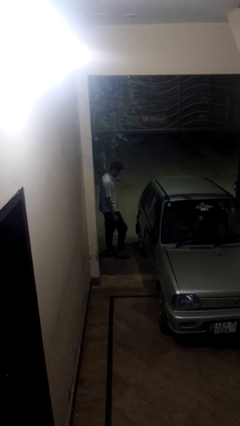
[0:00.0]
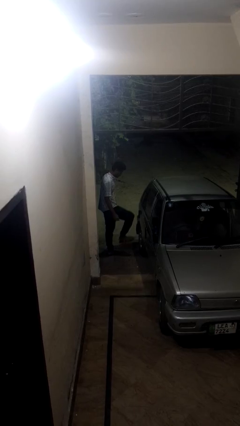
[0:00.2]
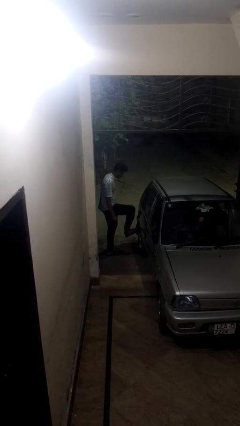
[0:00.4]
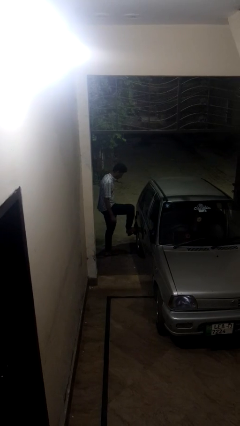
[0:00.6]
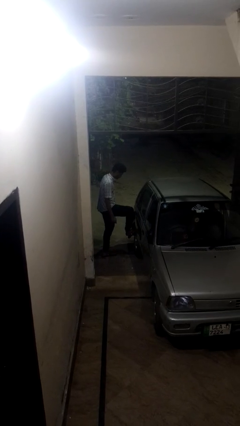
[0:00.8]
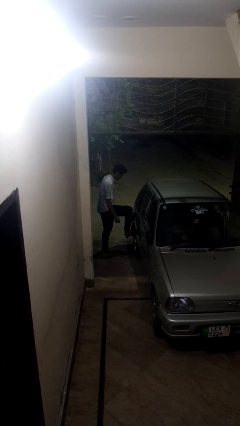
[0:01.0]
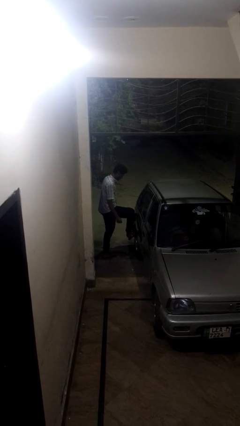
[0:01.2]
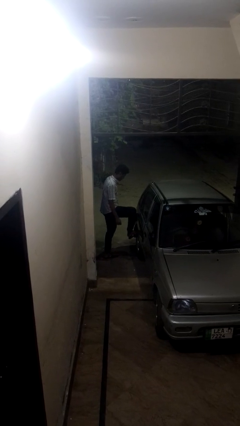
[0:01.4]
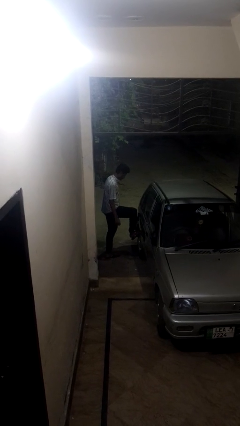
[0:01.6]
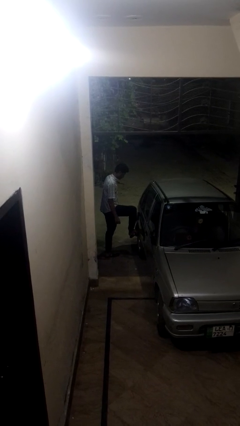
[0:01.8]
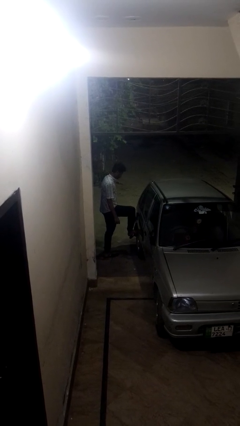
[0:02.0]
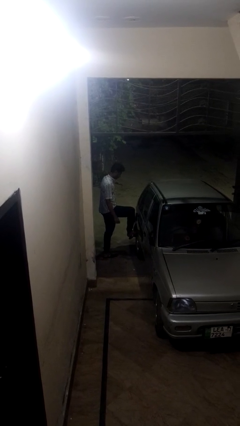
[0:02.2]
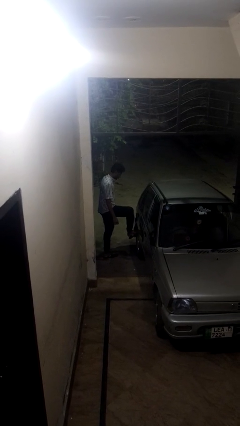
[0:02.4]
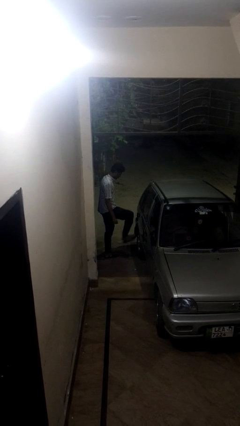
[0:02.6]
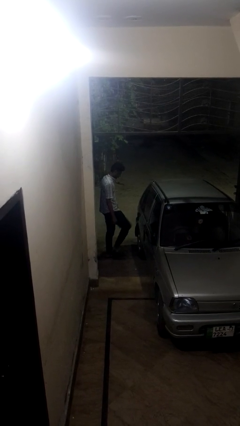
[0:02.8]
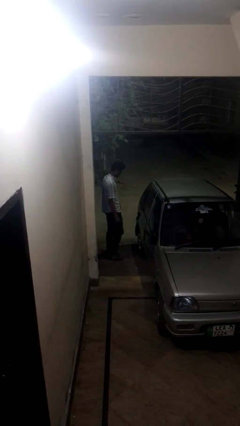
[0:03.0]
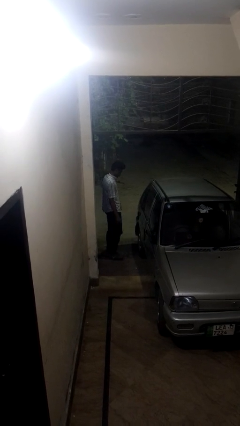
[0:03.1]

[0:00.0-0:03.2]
person kicks car tires

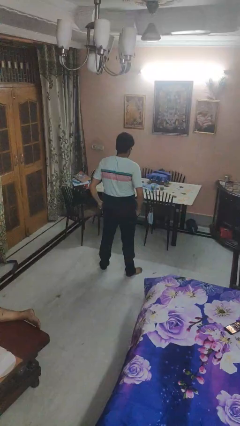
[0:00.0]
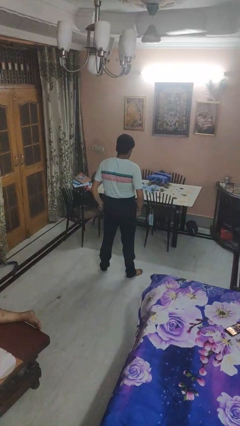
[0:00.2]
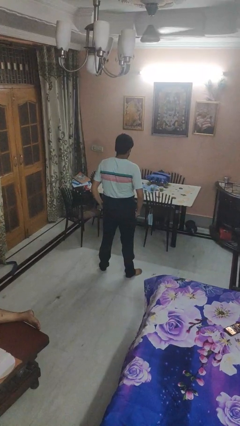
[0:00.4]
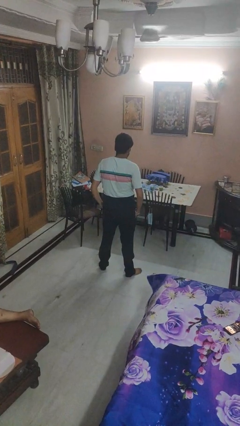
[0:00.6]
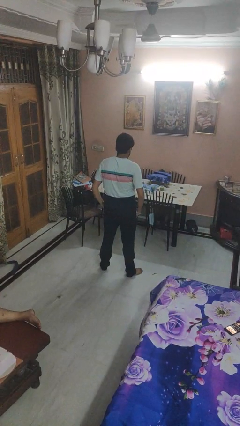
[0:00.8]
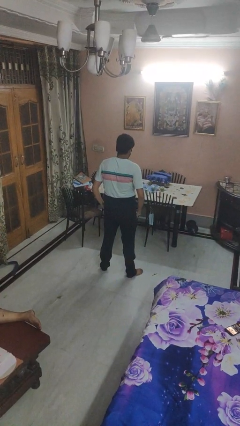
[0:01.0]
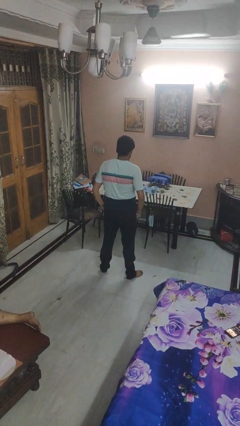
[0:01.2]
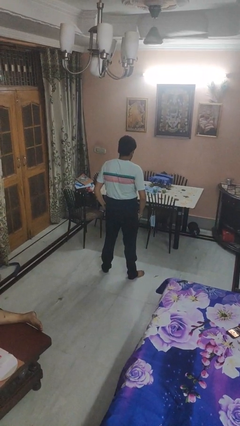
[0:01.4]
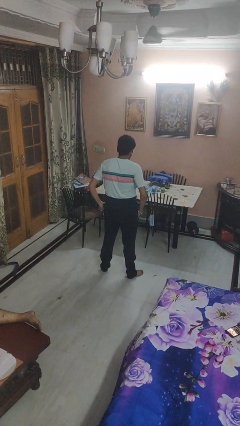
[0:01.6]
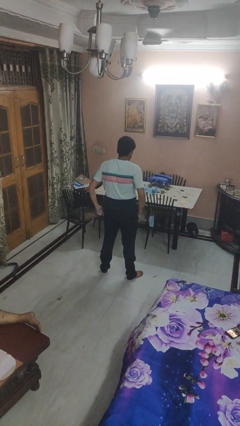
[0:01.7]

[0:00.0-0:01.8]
person puts hands in back pockets

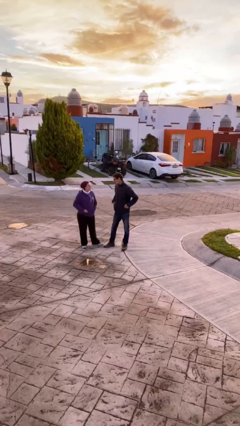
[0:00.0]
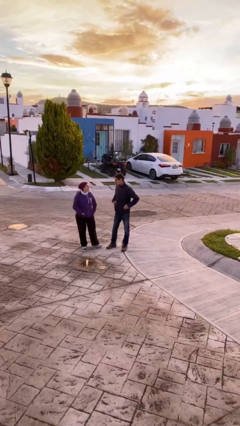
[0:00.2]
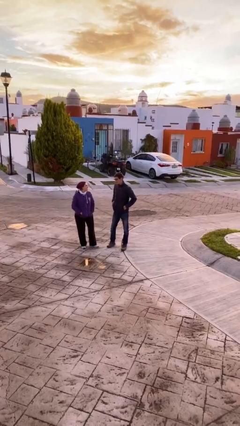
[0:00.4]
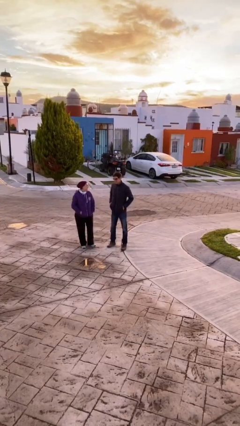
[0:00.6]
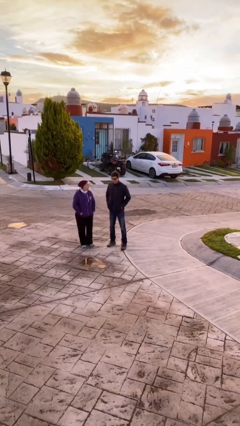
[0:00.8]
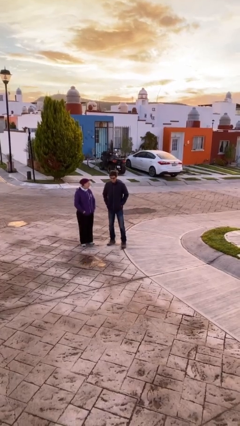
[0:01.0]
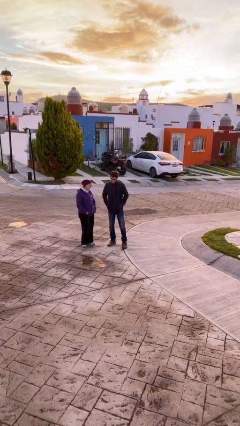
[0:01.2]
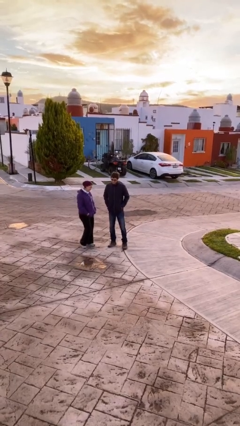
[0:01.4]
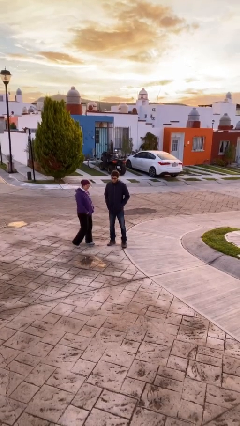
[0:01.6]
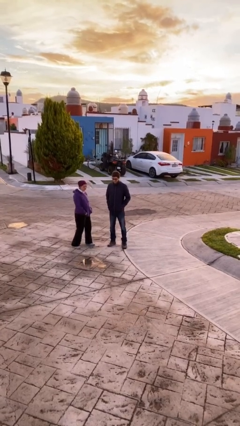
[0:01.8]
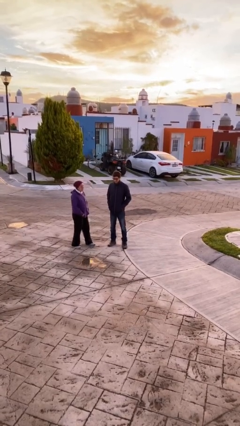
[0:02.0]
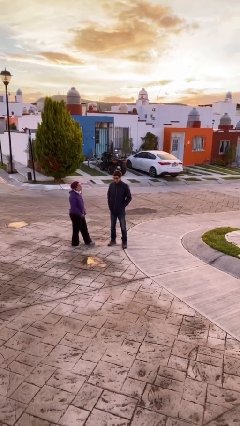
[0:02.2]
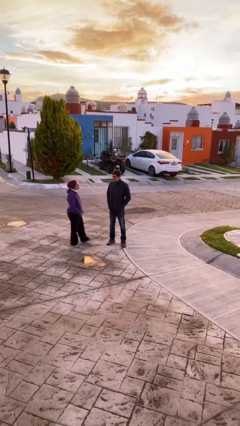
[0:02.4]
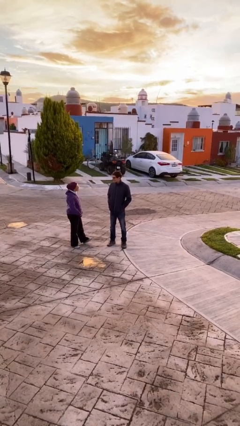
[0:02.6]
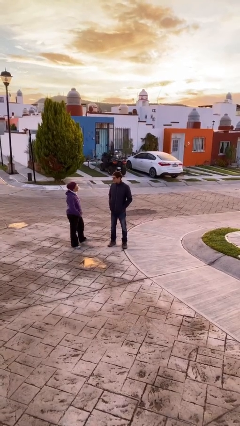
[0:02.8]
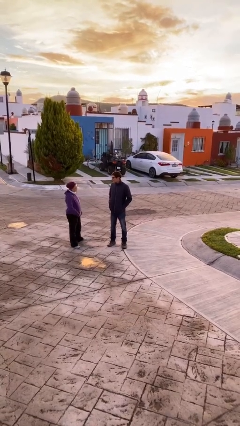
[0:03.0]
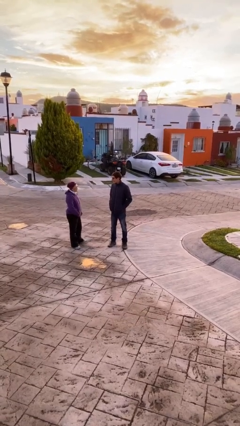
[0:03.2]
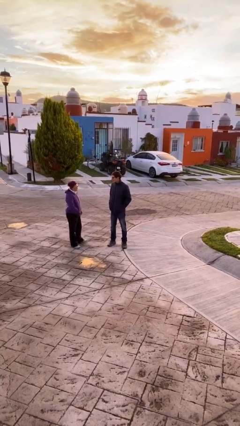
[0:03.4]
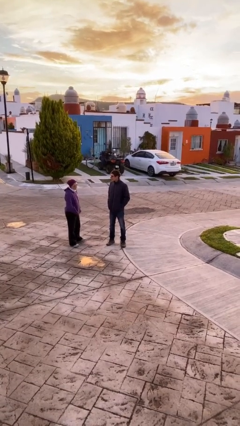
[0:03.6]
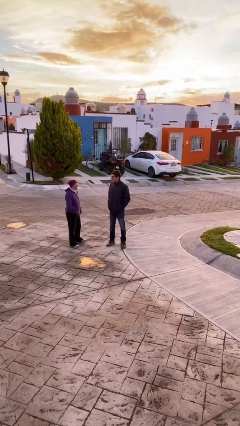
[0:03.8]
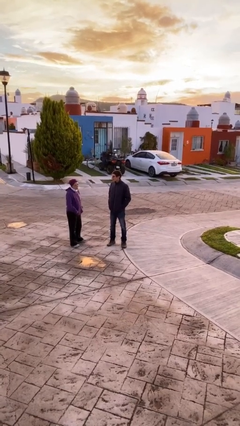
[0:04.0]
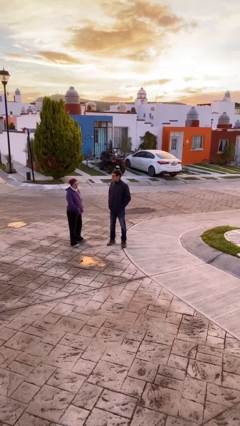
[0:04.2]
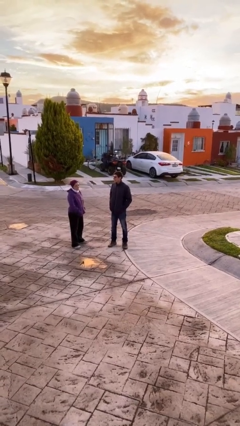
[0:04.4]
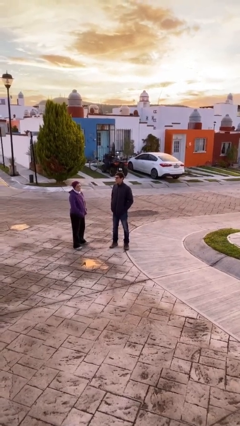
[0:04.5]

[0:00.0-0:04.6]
person talks to person

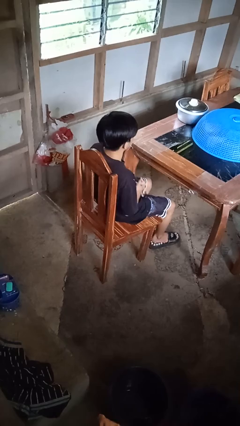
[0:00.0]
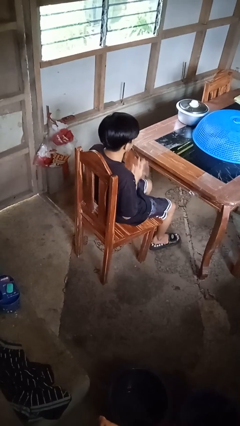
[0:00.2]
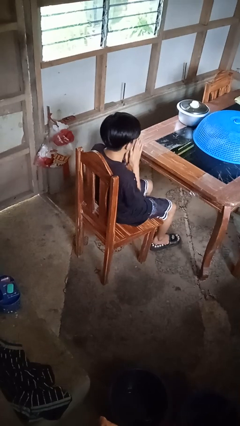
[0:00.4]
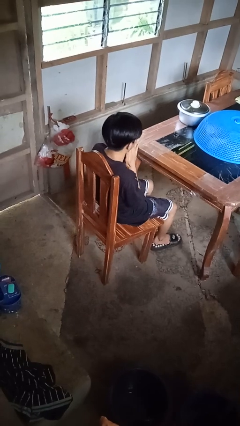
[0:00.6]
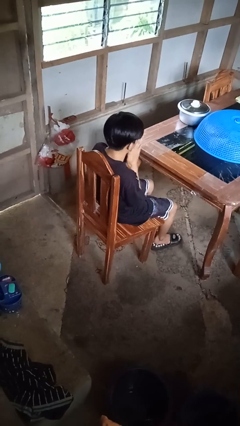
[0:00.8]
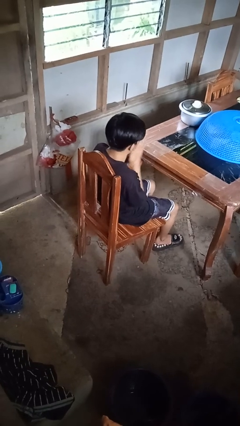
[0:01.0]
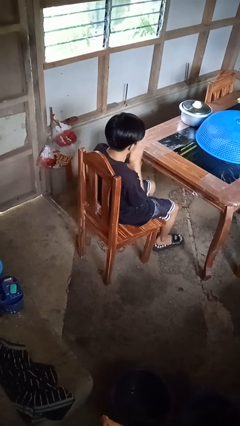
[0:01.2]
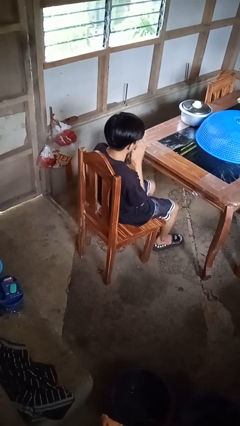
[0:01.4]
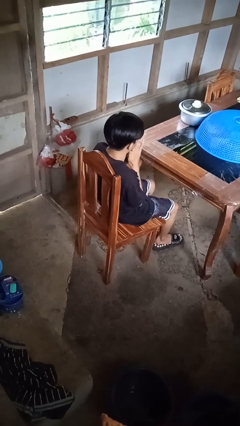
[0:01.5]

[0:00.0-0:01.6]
person blows into hands

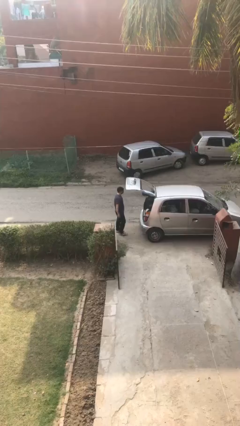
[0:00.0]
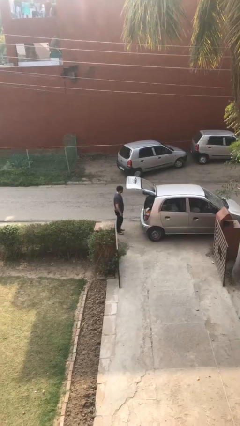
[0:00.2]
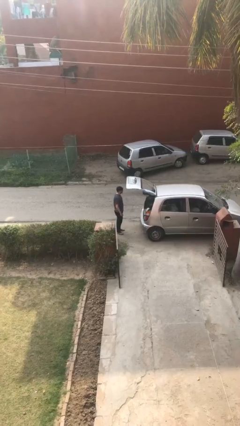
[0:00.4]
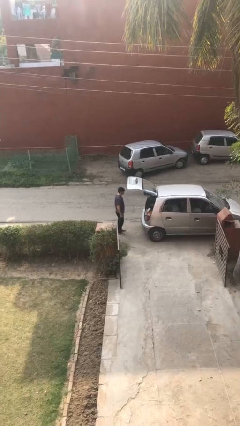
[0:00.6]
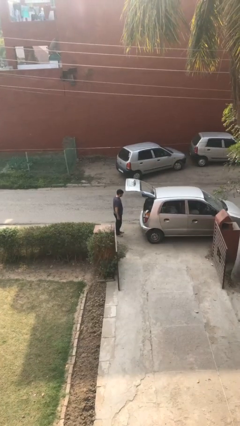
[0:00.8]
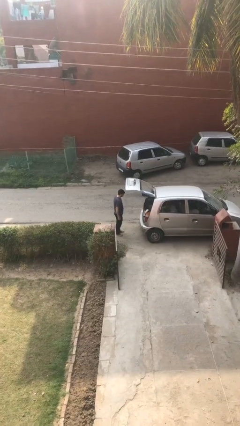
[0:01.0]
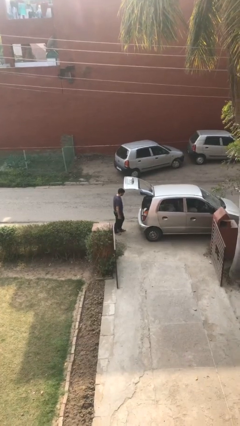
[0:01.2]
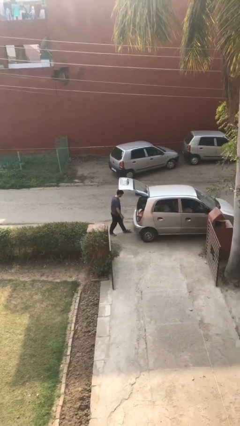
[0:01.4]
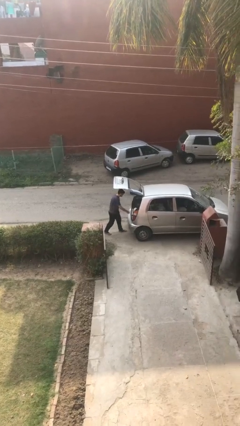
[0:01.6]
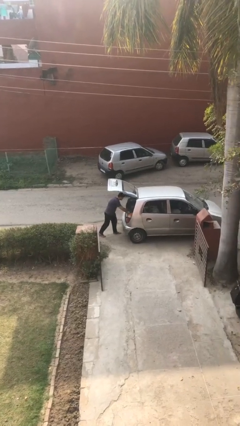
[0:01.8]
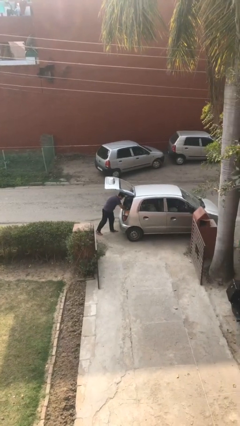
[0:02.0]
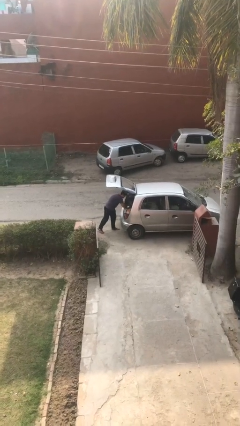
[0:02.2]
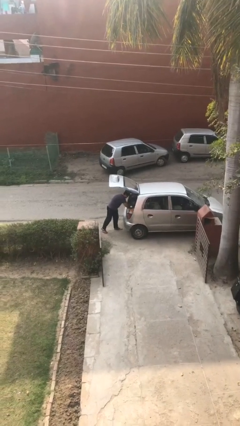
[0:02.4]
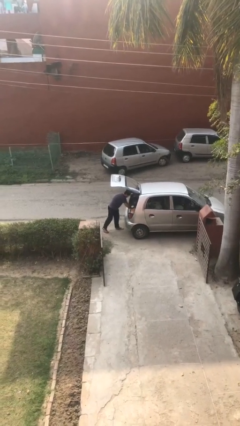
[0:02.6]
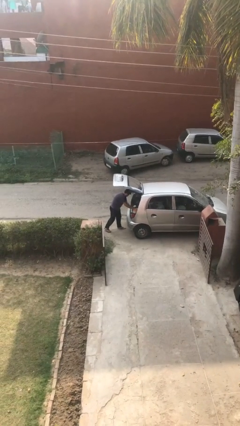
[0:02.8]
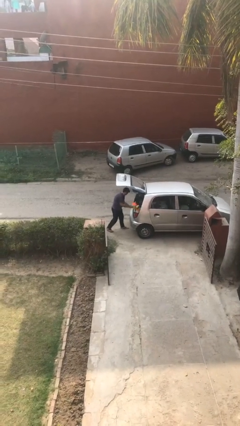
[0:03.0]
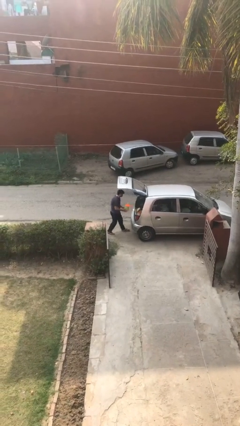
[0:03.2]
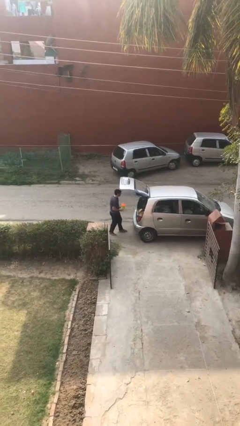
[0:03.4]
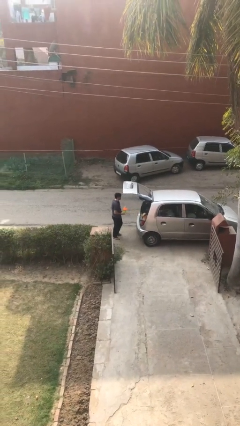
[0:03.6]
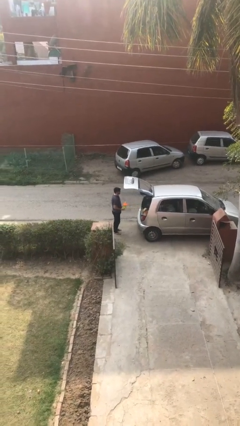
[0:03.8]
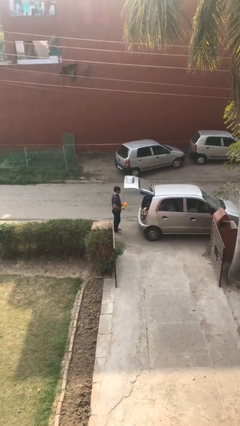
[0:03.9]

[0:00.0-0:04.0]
person unloads car

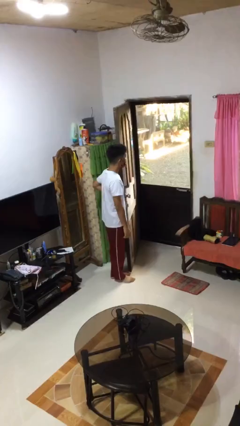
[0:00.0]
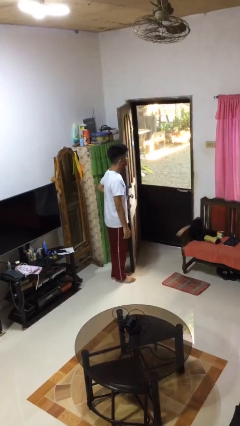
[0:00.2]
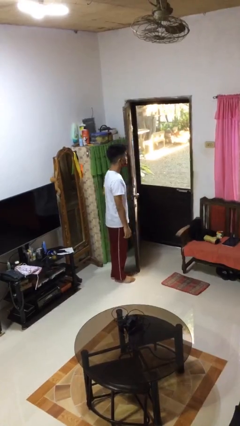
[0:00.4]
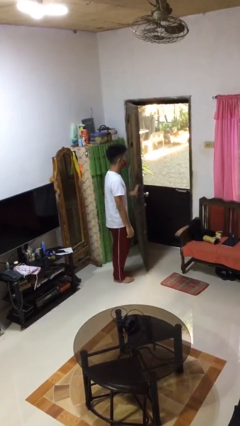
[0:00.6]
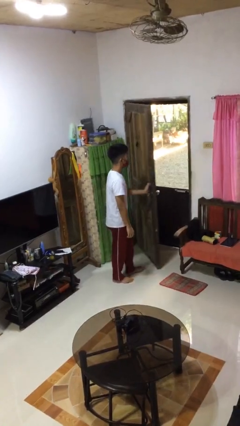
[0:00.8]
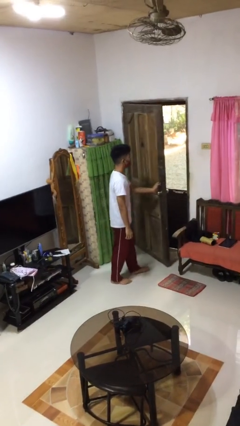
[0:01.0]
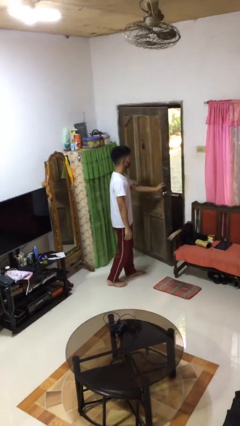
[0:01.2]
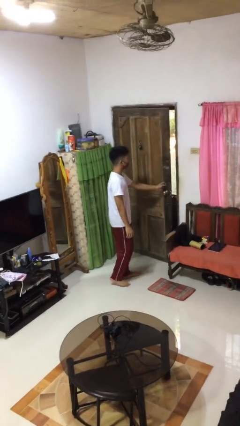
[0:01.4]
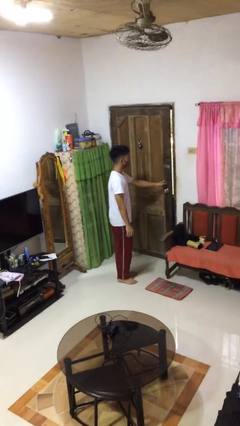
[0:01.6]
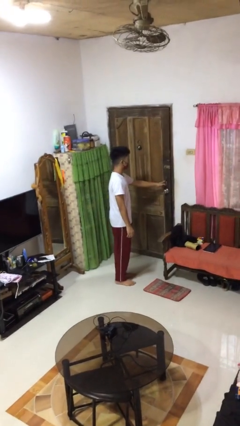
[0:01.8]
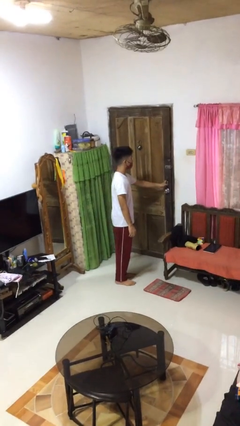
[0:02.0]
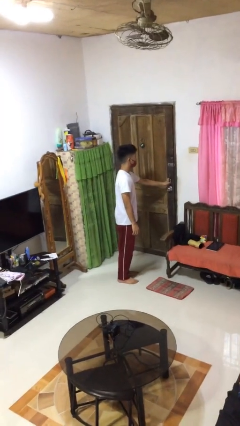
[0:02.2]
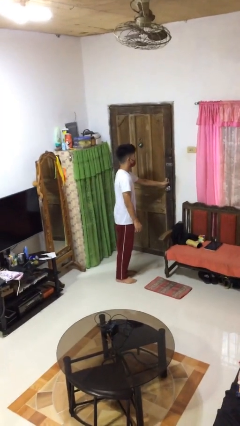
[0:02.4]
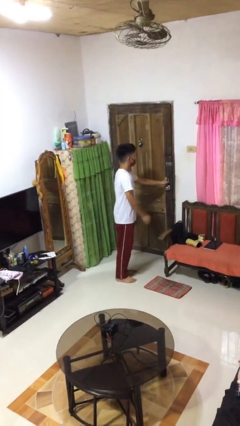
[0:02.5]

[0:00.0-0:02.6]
person closes facility door
